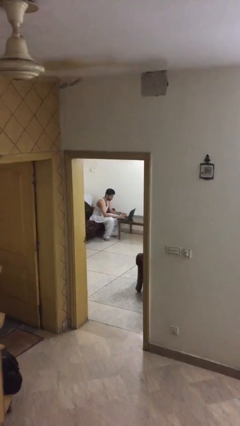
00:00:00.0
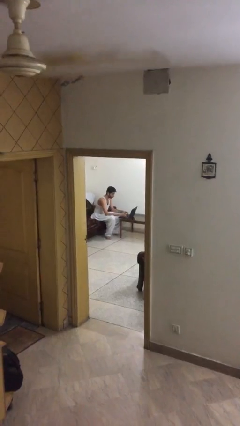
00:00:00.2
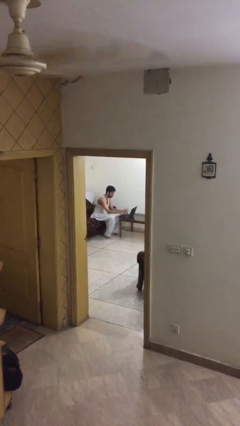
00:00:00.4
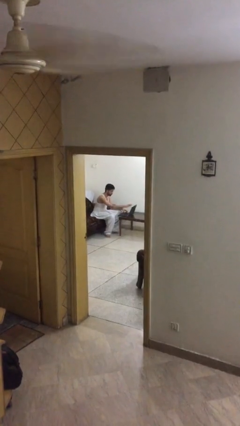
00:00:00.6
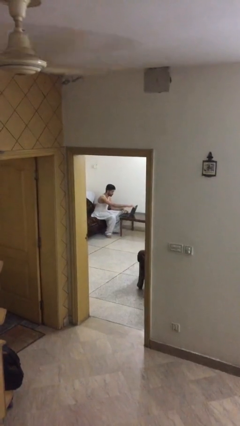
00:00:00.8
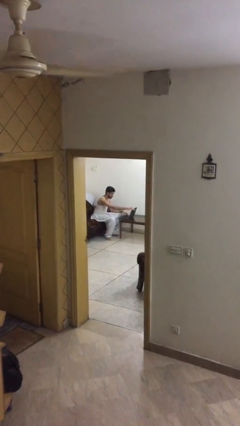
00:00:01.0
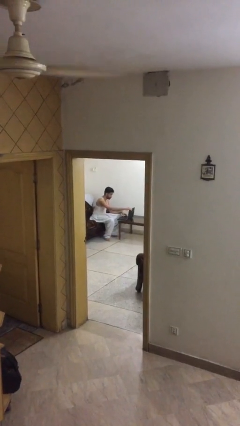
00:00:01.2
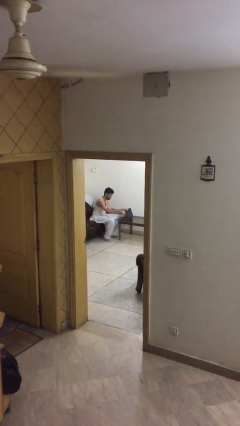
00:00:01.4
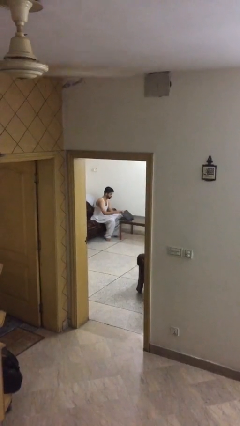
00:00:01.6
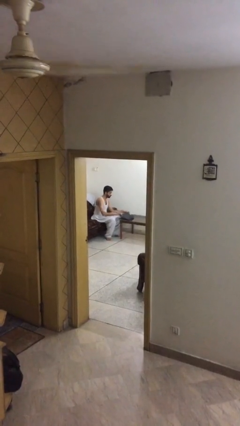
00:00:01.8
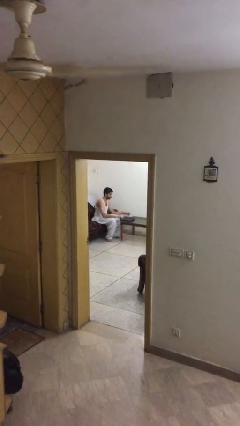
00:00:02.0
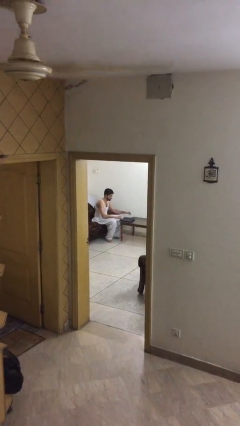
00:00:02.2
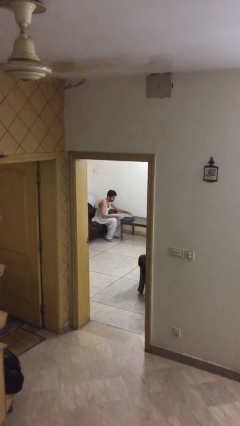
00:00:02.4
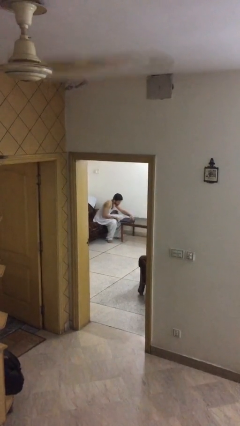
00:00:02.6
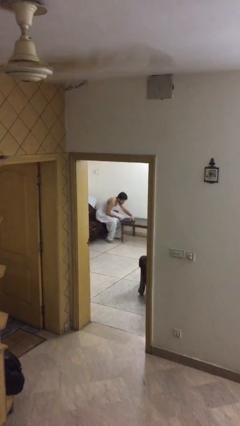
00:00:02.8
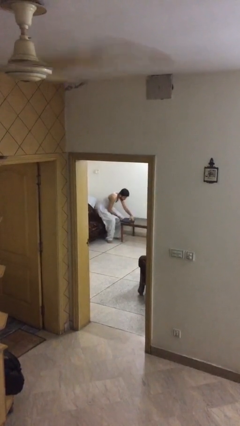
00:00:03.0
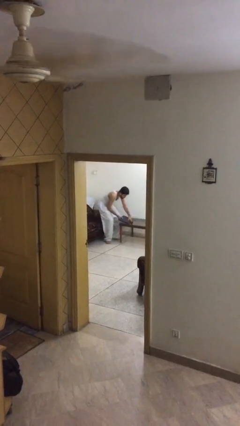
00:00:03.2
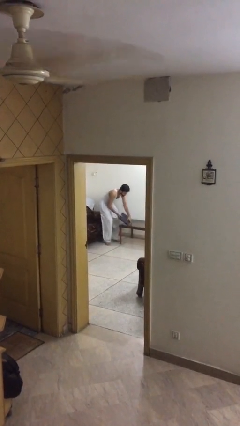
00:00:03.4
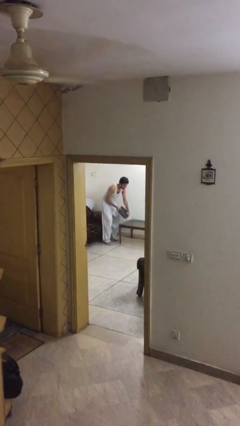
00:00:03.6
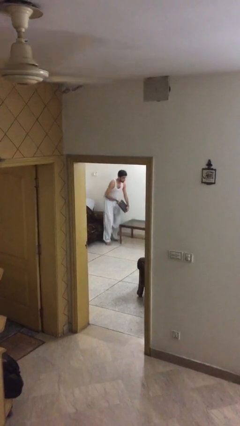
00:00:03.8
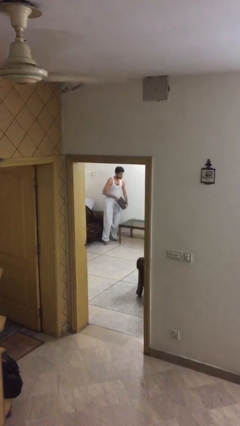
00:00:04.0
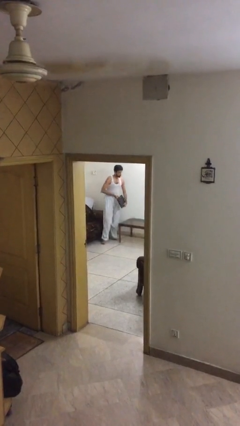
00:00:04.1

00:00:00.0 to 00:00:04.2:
person stands up

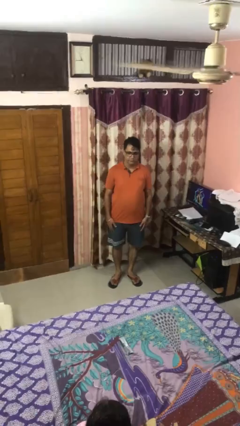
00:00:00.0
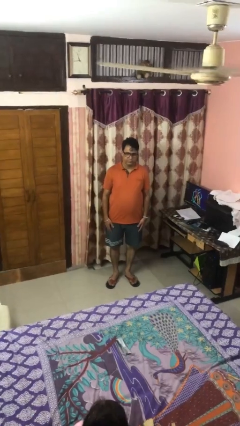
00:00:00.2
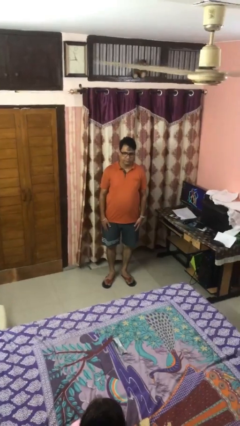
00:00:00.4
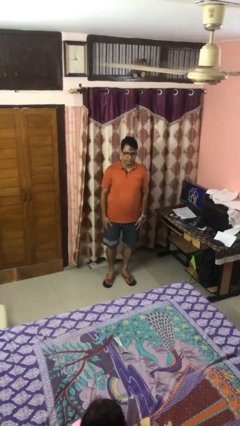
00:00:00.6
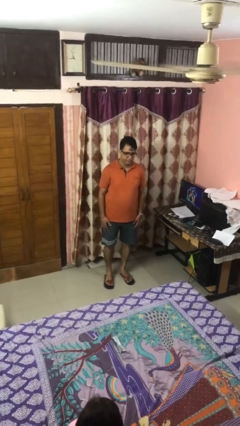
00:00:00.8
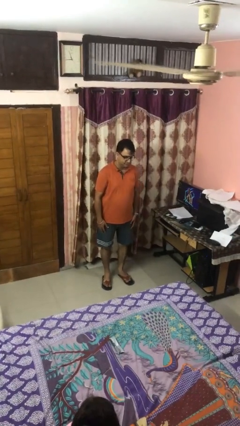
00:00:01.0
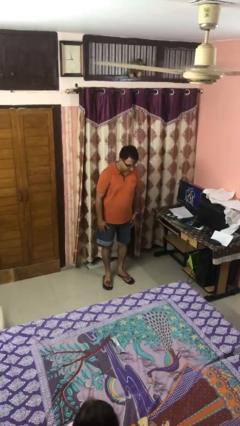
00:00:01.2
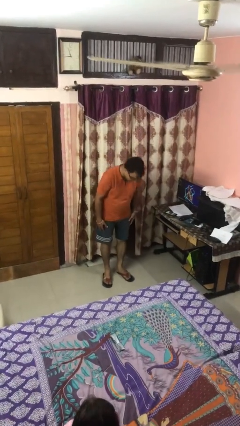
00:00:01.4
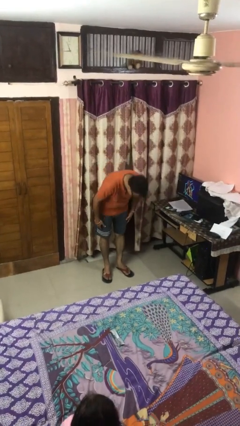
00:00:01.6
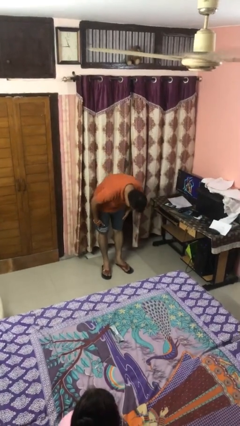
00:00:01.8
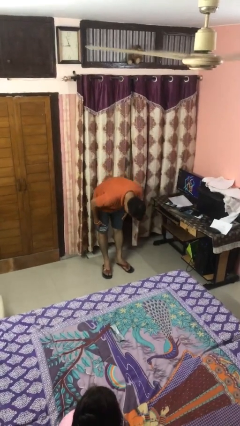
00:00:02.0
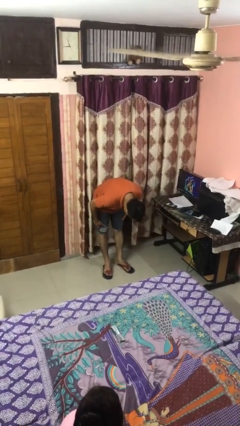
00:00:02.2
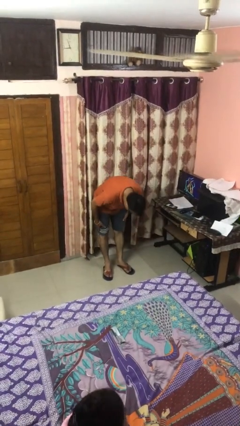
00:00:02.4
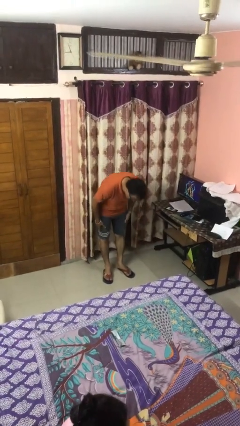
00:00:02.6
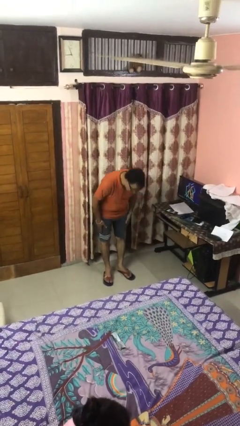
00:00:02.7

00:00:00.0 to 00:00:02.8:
person bows

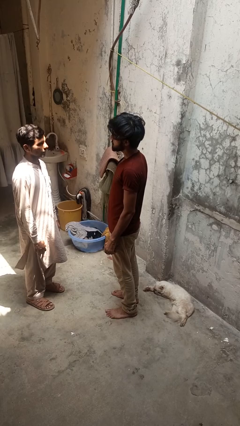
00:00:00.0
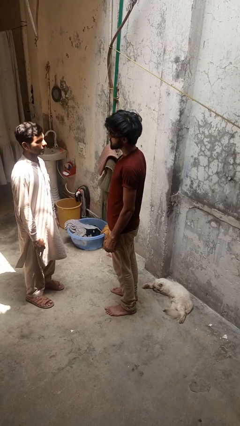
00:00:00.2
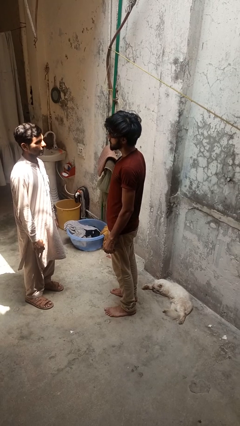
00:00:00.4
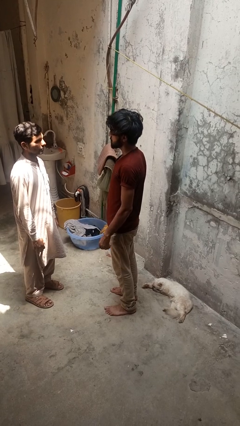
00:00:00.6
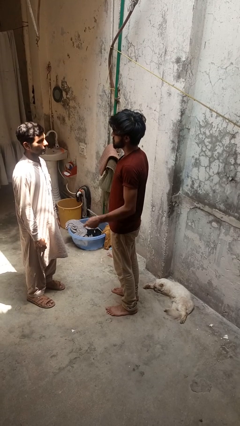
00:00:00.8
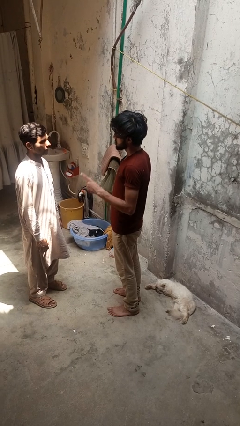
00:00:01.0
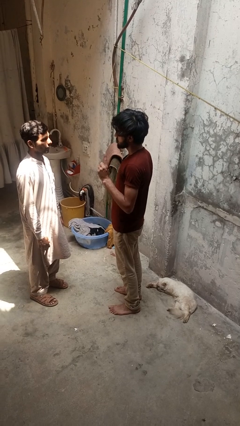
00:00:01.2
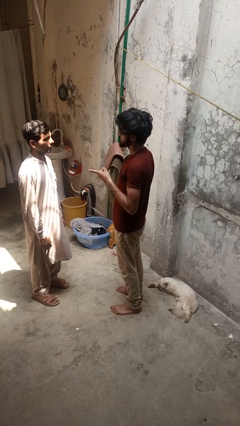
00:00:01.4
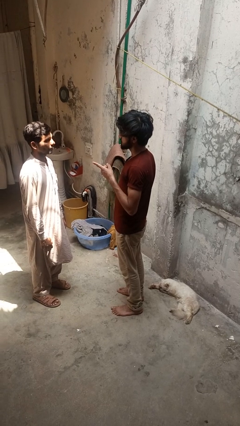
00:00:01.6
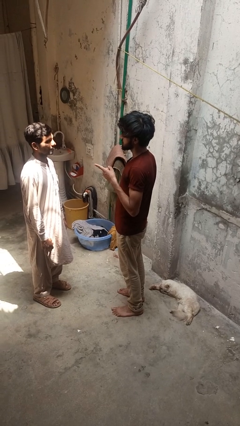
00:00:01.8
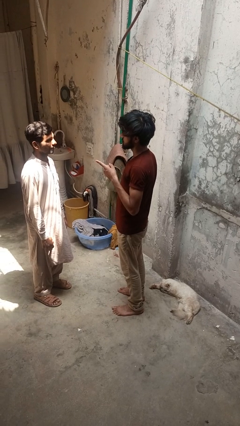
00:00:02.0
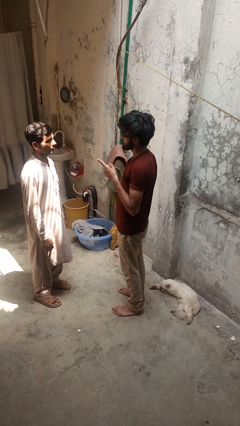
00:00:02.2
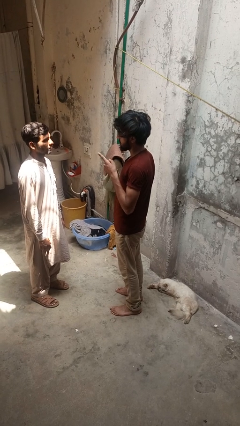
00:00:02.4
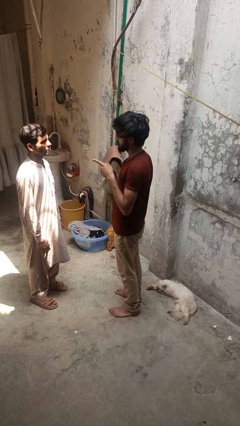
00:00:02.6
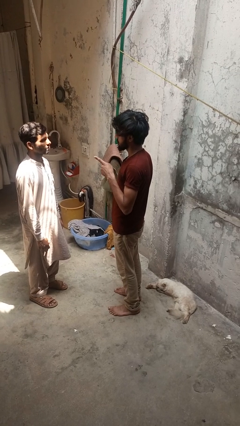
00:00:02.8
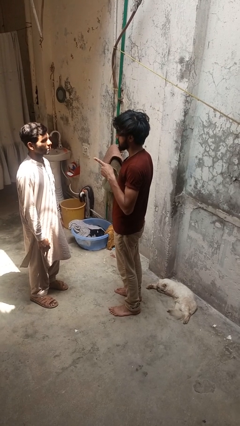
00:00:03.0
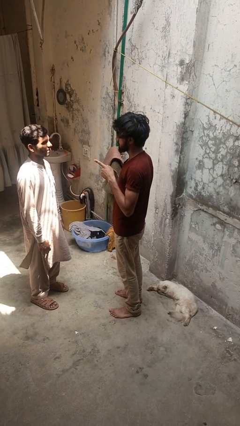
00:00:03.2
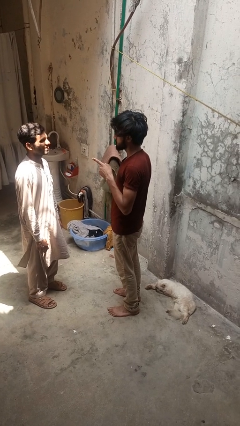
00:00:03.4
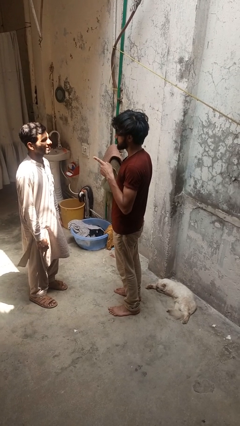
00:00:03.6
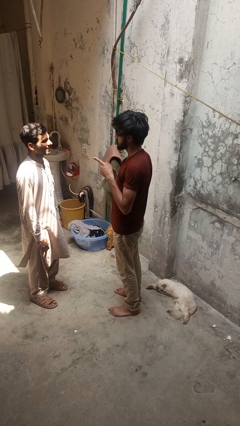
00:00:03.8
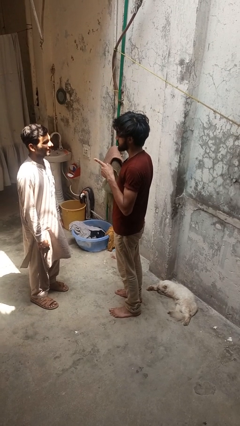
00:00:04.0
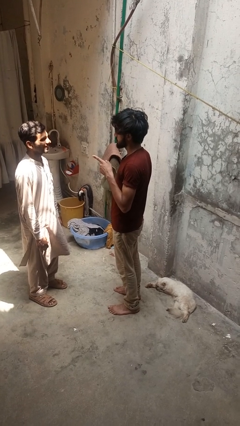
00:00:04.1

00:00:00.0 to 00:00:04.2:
person points at person

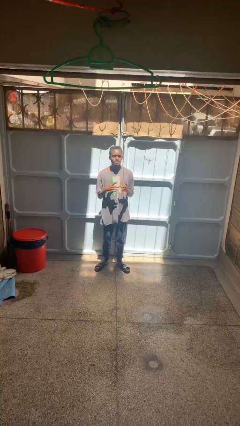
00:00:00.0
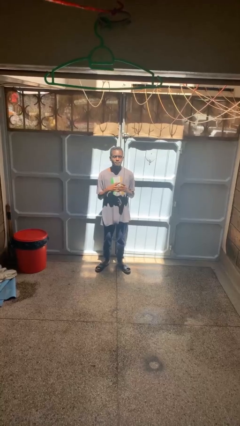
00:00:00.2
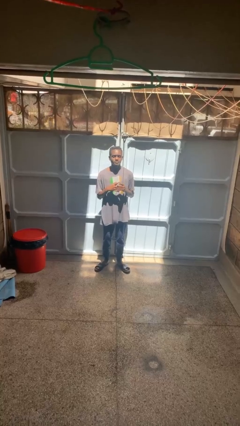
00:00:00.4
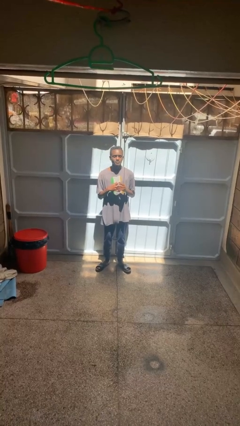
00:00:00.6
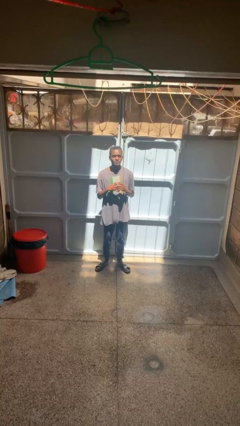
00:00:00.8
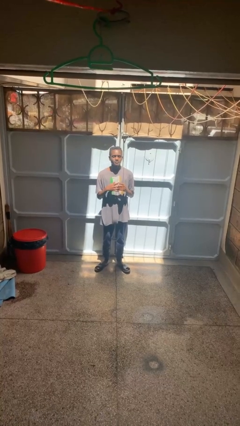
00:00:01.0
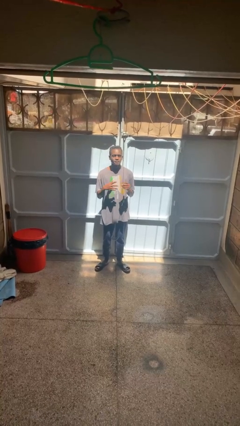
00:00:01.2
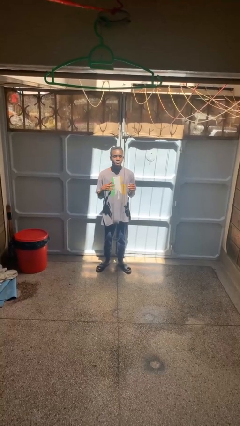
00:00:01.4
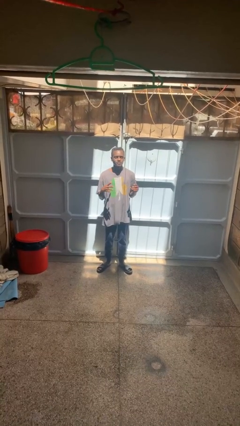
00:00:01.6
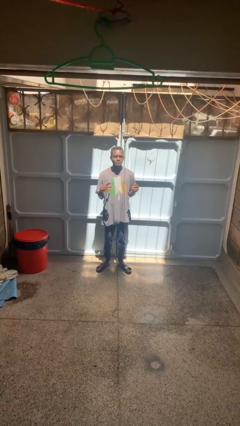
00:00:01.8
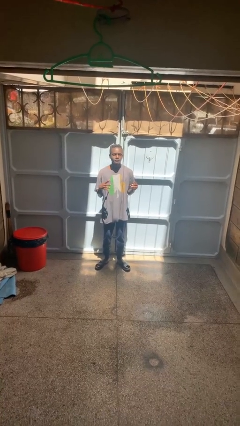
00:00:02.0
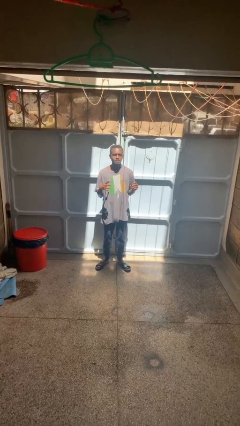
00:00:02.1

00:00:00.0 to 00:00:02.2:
person takes off ring

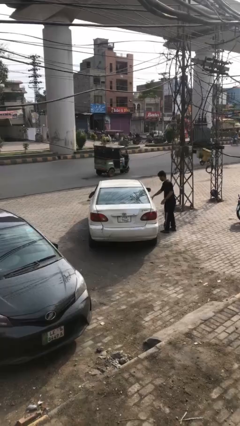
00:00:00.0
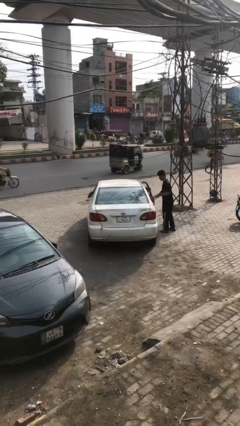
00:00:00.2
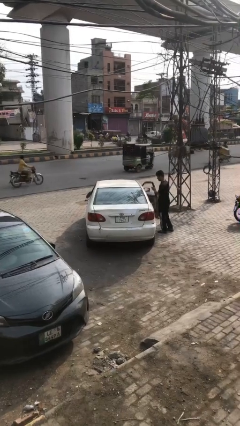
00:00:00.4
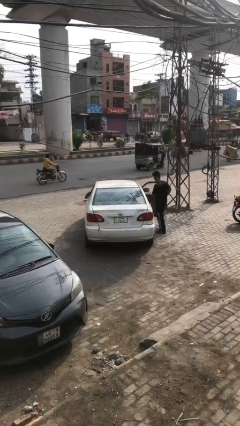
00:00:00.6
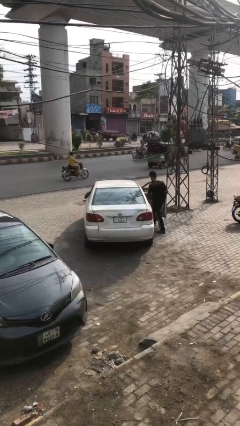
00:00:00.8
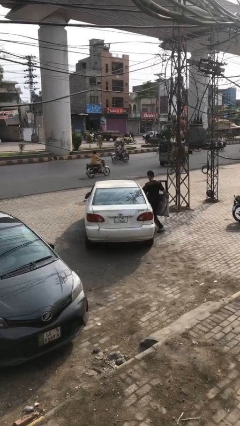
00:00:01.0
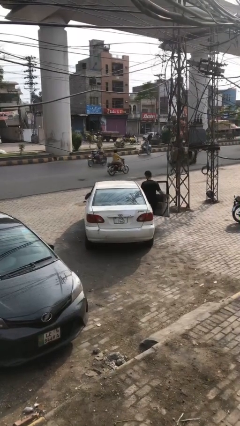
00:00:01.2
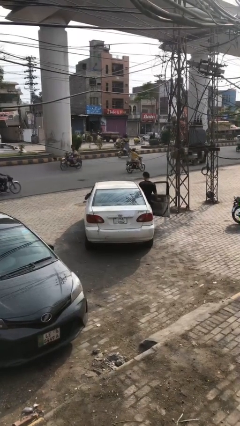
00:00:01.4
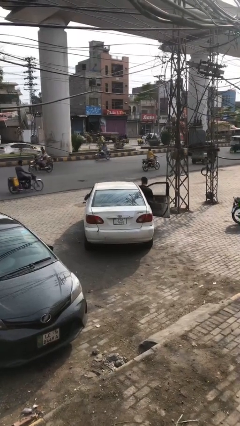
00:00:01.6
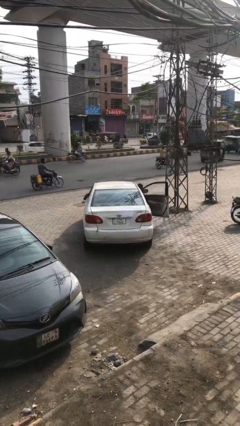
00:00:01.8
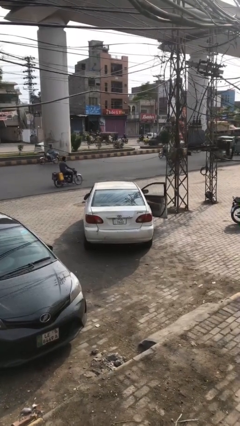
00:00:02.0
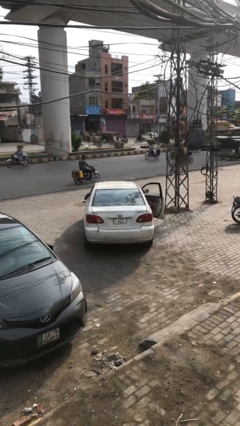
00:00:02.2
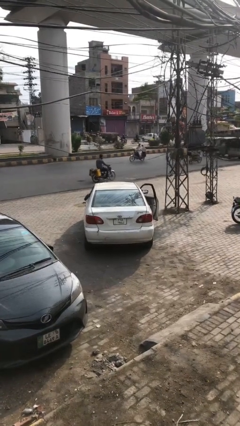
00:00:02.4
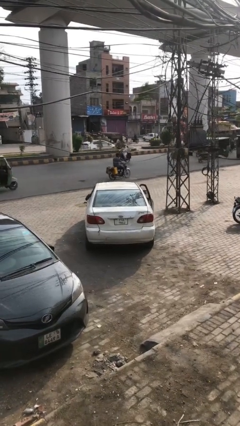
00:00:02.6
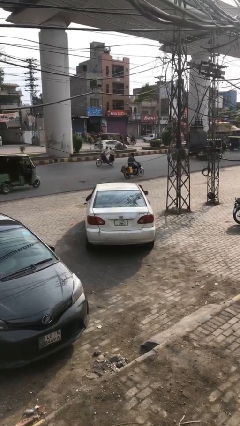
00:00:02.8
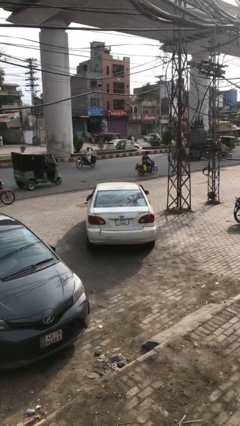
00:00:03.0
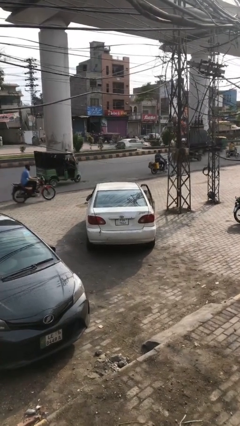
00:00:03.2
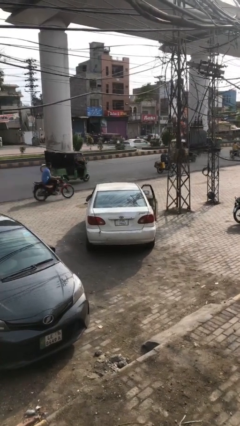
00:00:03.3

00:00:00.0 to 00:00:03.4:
car picks up person

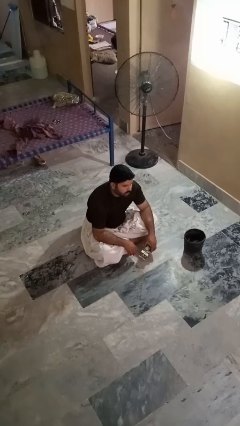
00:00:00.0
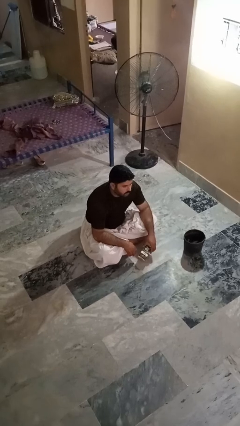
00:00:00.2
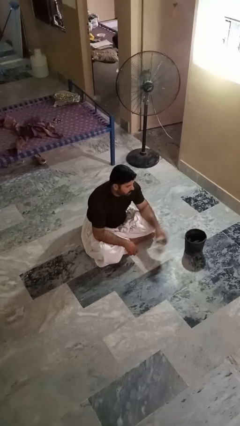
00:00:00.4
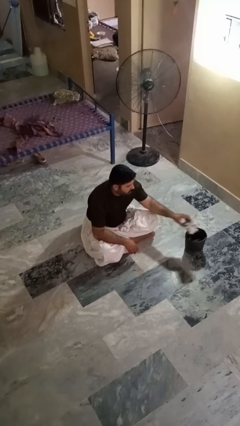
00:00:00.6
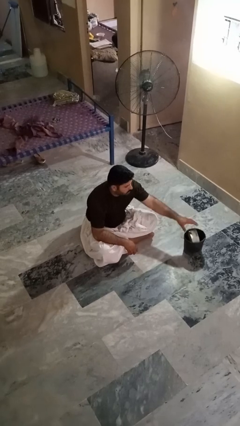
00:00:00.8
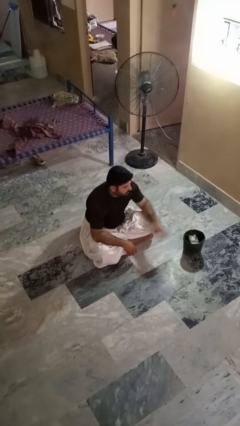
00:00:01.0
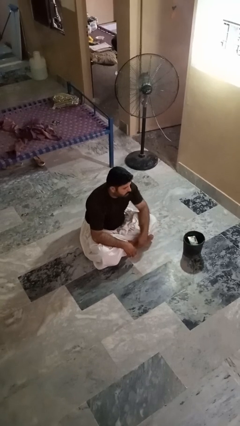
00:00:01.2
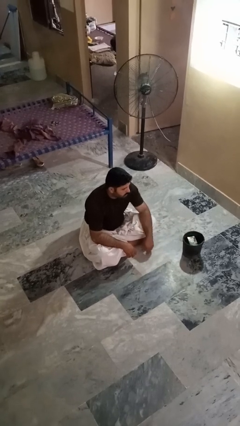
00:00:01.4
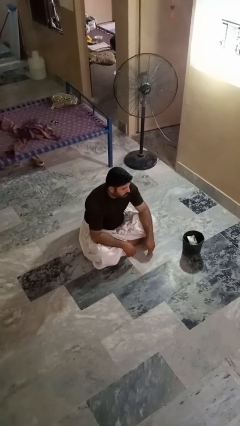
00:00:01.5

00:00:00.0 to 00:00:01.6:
person puts object into basket
